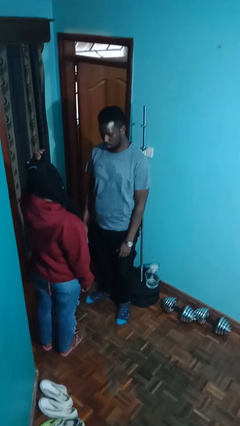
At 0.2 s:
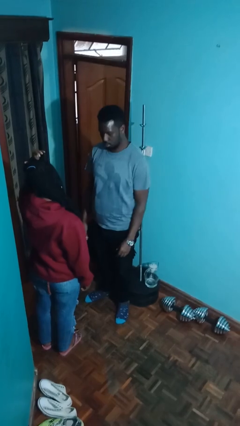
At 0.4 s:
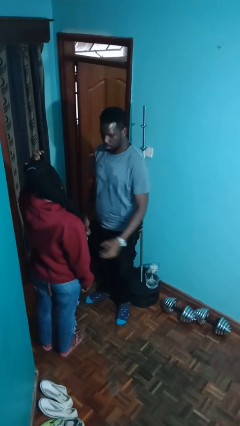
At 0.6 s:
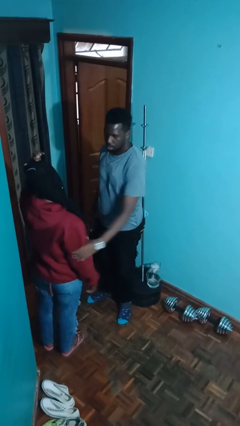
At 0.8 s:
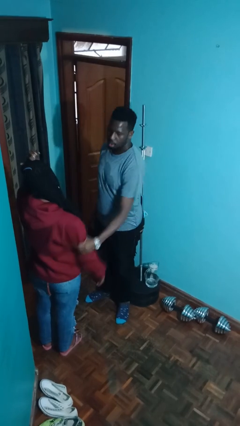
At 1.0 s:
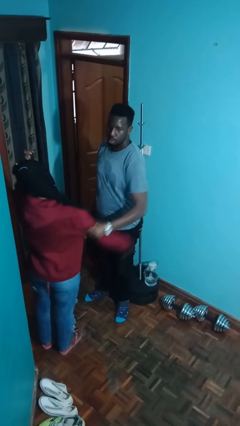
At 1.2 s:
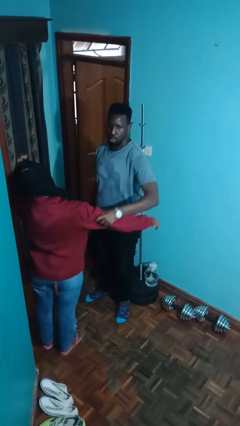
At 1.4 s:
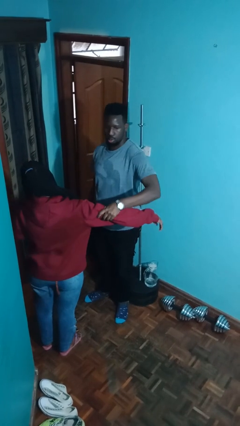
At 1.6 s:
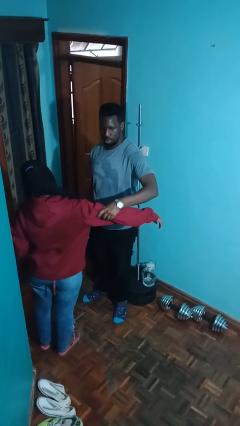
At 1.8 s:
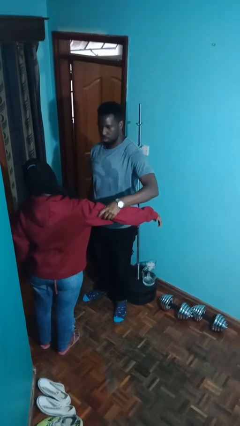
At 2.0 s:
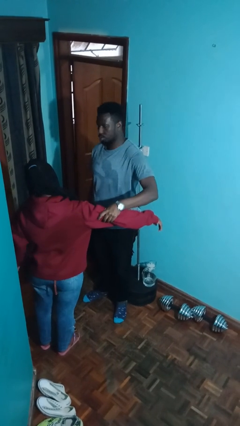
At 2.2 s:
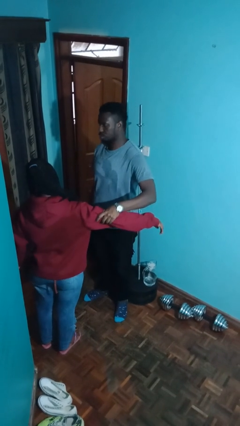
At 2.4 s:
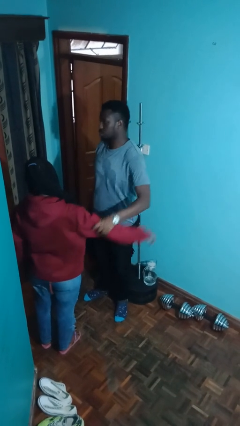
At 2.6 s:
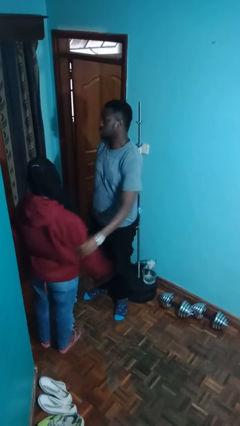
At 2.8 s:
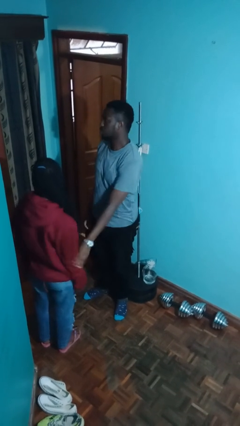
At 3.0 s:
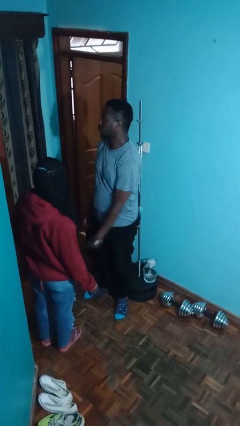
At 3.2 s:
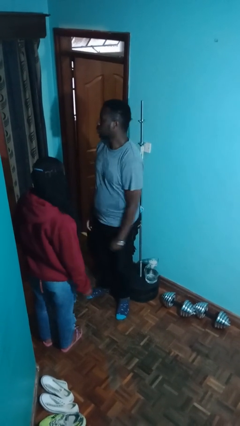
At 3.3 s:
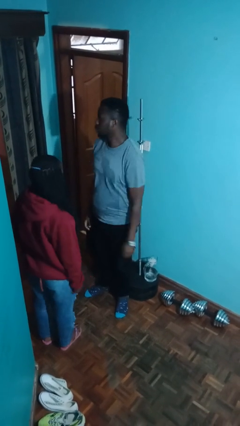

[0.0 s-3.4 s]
person grabs person by bicep

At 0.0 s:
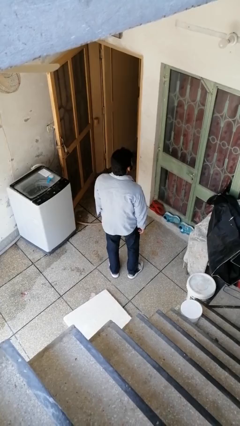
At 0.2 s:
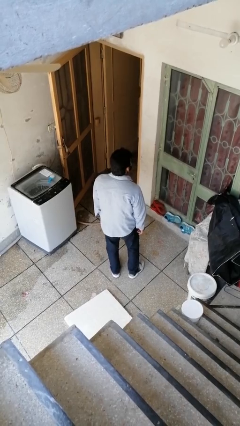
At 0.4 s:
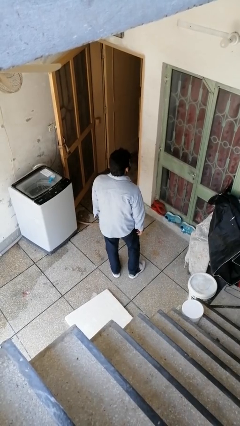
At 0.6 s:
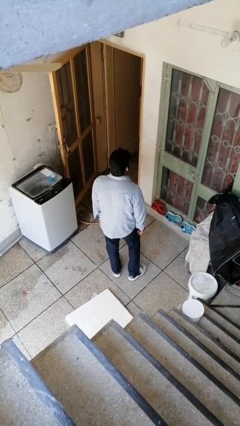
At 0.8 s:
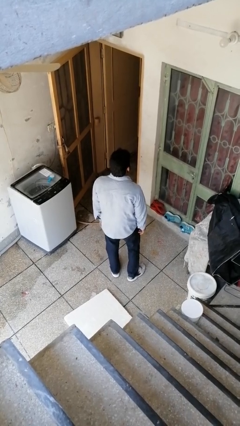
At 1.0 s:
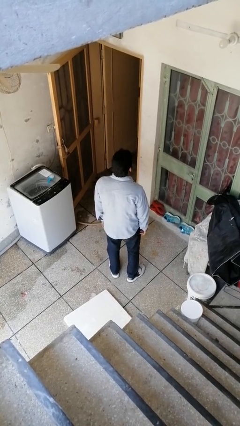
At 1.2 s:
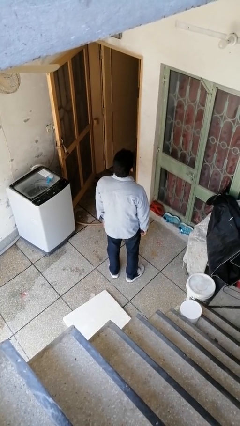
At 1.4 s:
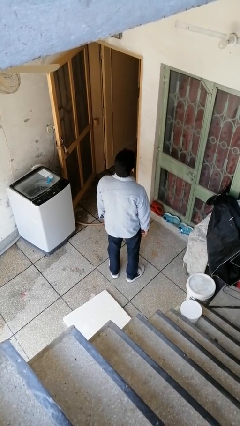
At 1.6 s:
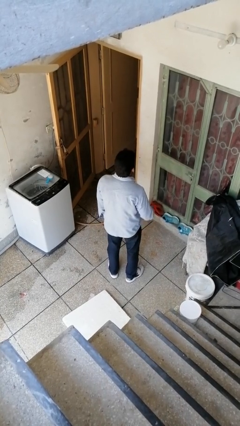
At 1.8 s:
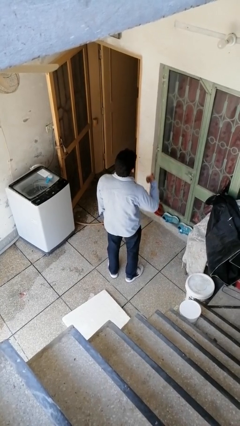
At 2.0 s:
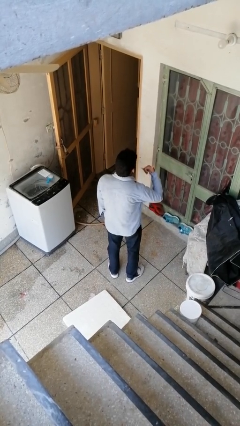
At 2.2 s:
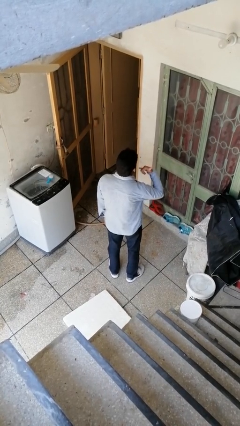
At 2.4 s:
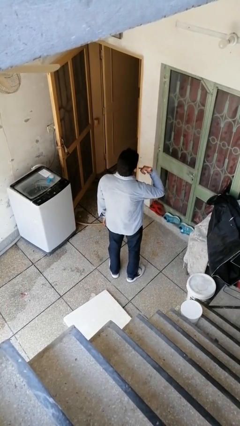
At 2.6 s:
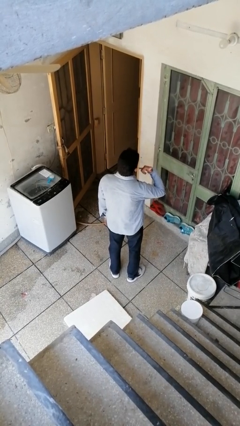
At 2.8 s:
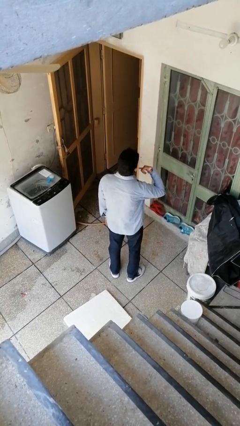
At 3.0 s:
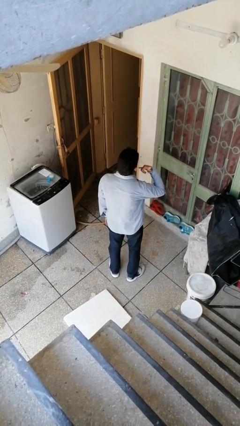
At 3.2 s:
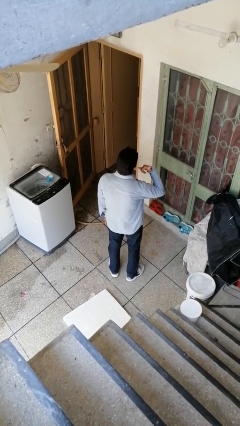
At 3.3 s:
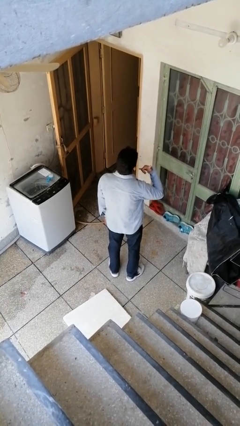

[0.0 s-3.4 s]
person gestures call me

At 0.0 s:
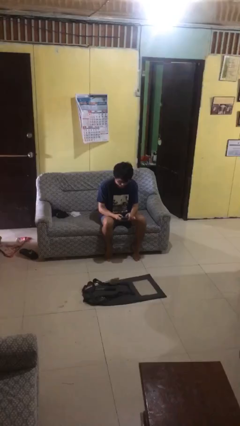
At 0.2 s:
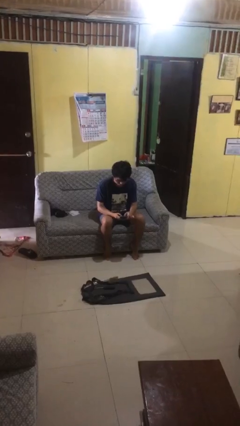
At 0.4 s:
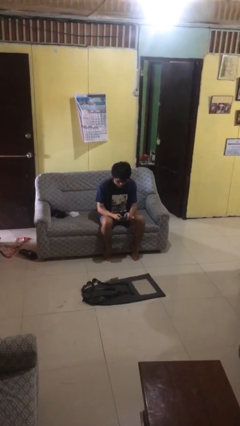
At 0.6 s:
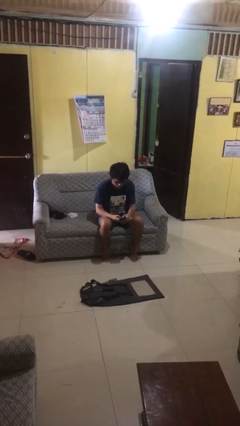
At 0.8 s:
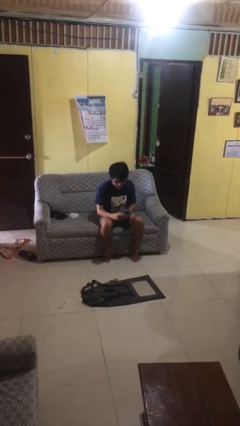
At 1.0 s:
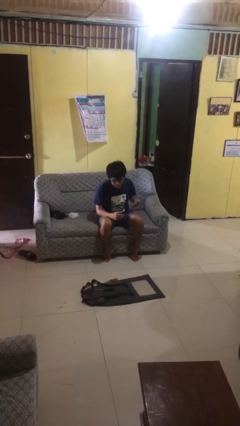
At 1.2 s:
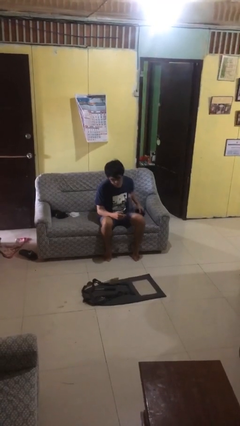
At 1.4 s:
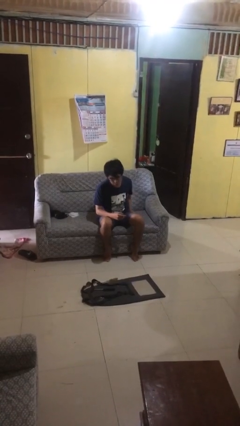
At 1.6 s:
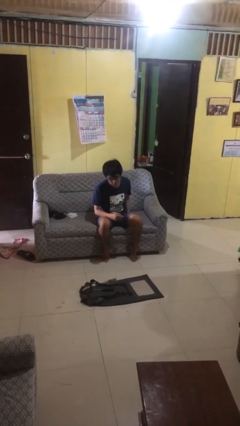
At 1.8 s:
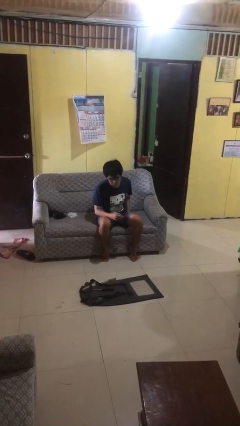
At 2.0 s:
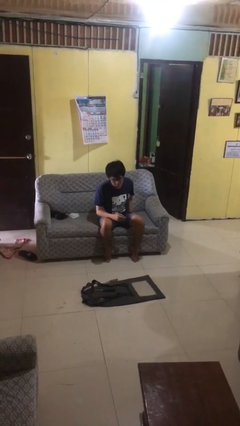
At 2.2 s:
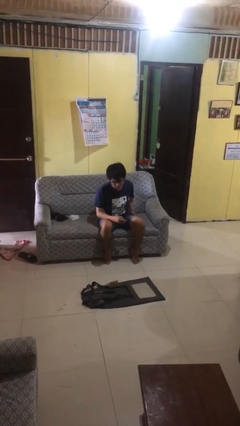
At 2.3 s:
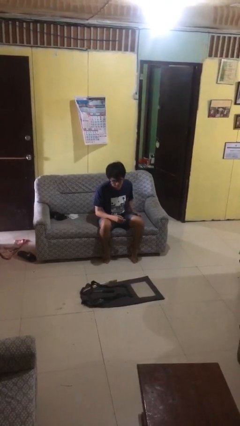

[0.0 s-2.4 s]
person puts phone into pocket

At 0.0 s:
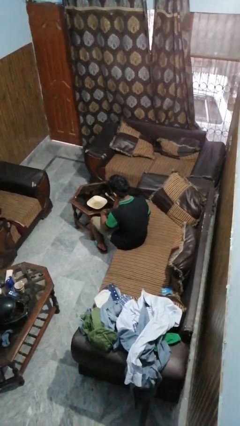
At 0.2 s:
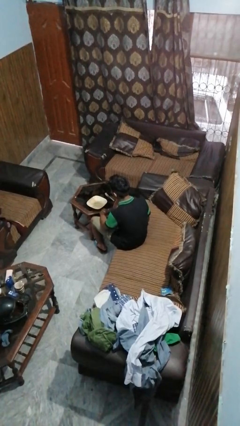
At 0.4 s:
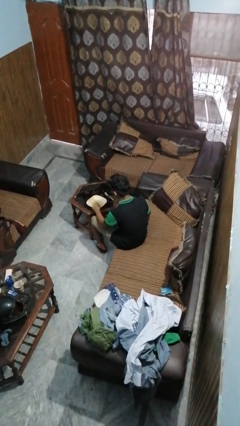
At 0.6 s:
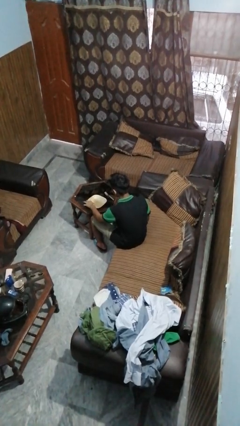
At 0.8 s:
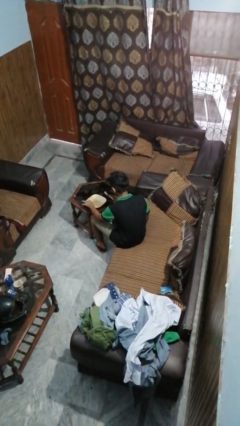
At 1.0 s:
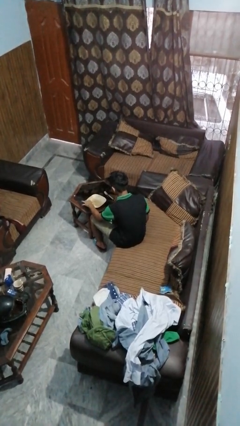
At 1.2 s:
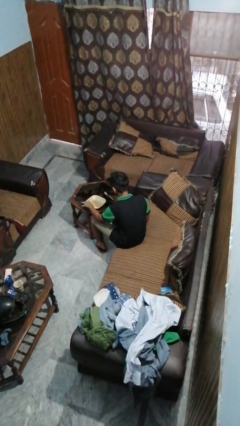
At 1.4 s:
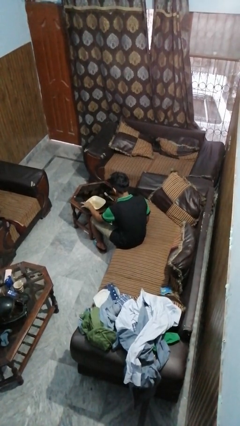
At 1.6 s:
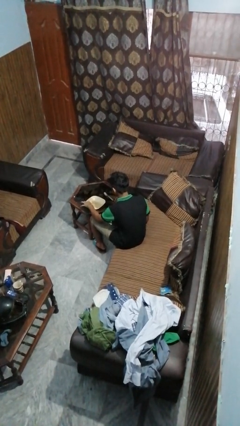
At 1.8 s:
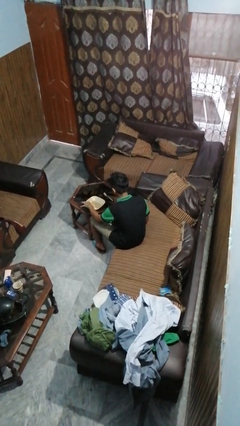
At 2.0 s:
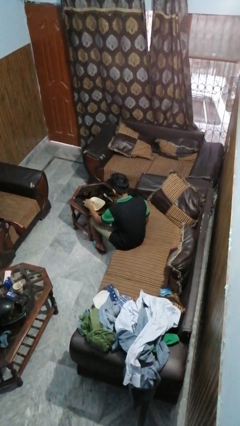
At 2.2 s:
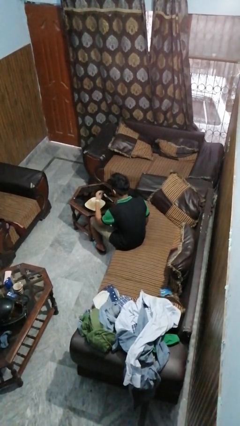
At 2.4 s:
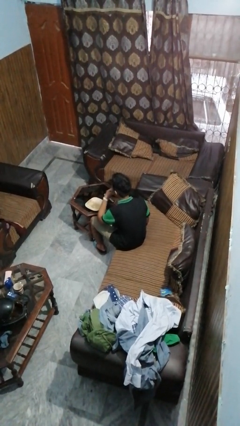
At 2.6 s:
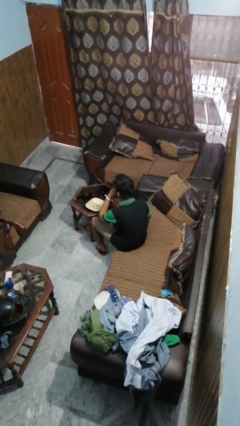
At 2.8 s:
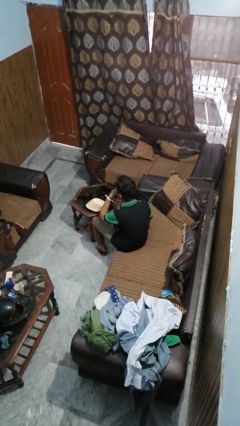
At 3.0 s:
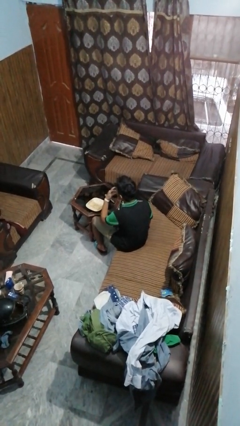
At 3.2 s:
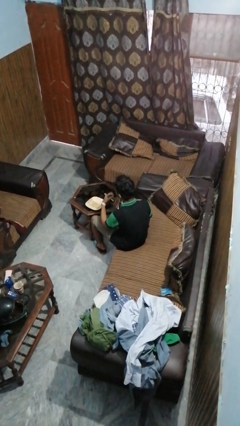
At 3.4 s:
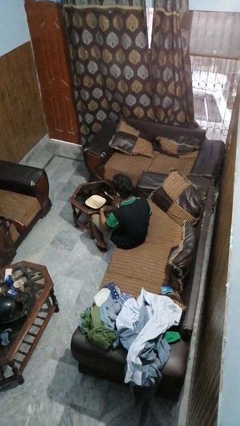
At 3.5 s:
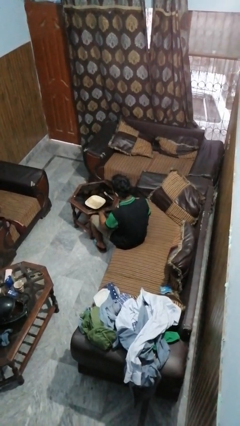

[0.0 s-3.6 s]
person eats with hands

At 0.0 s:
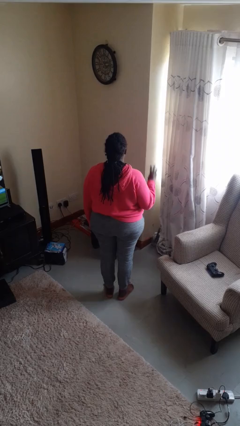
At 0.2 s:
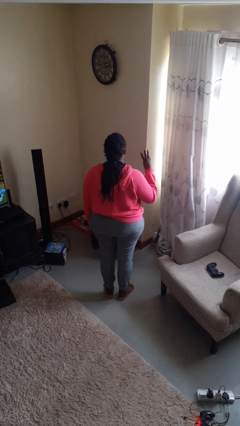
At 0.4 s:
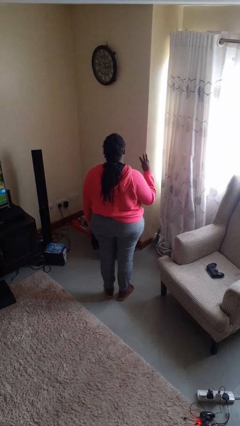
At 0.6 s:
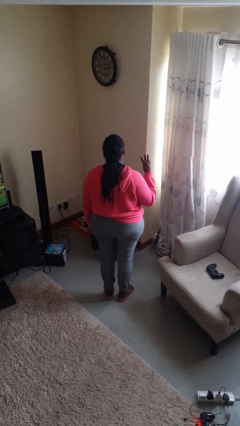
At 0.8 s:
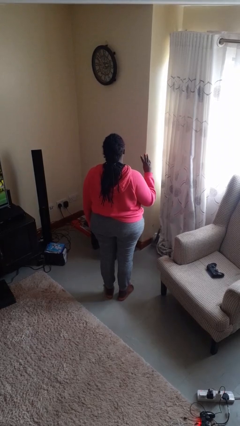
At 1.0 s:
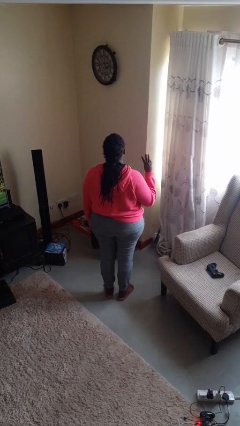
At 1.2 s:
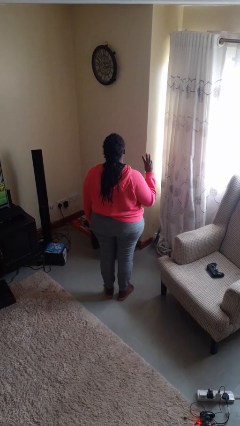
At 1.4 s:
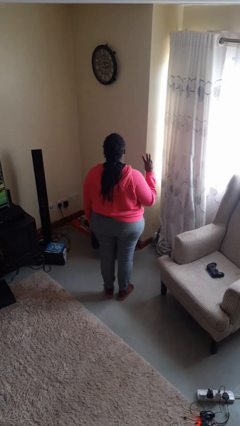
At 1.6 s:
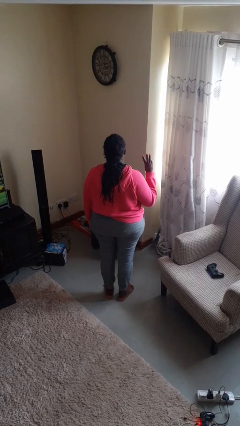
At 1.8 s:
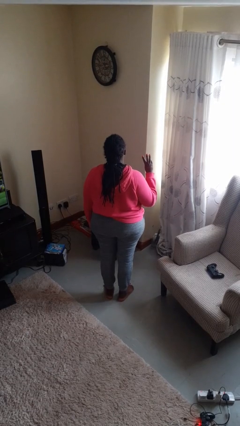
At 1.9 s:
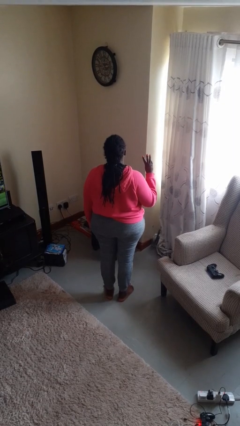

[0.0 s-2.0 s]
person gestures number three

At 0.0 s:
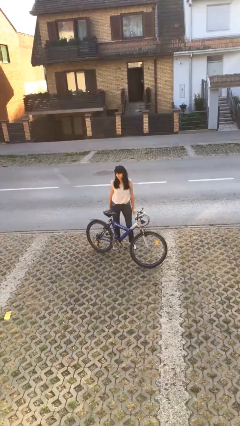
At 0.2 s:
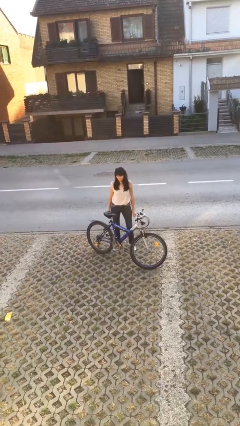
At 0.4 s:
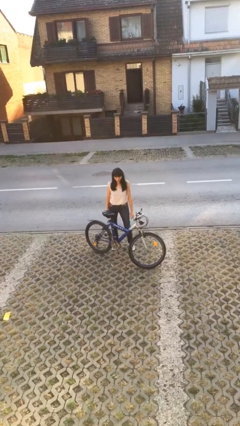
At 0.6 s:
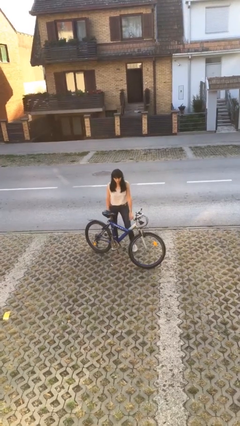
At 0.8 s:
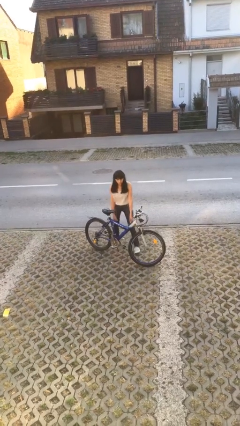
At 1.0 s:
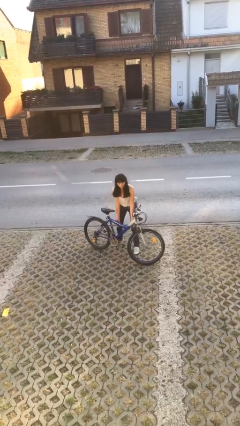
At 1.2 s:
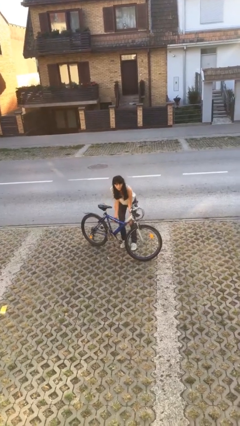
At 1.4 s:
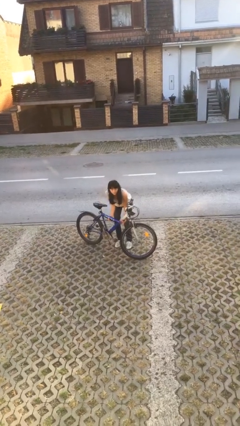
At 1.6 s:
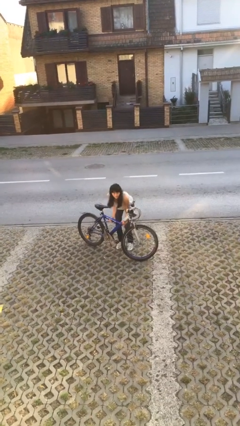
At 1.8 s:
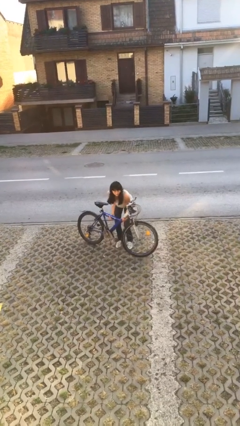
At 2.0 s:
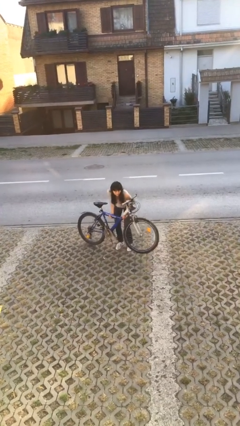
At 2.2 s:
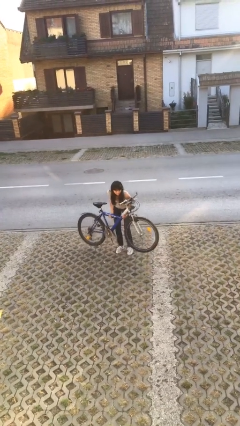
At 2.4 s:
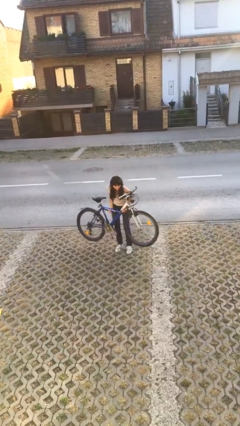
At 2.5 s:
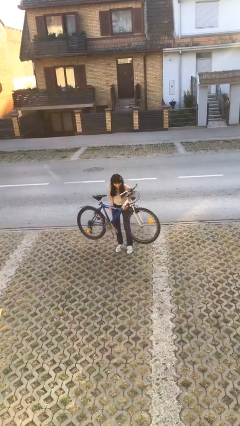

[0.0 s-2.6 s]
person picks up object from floor

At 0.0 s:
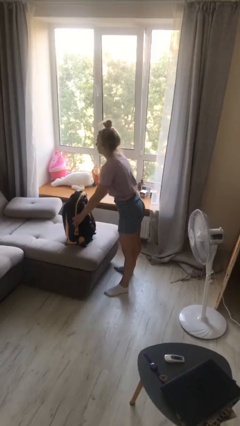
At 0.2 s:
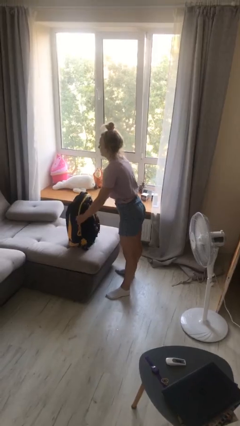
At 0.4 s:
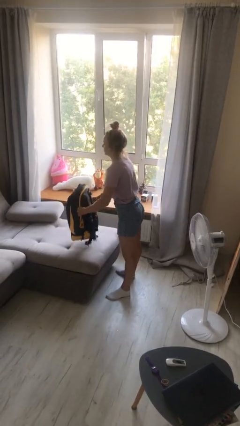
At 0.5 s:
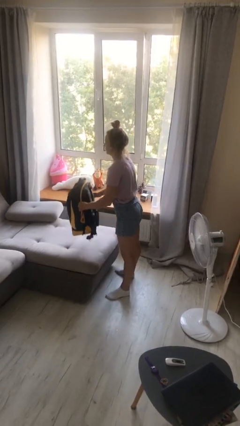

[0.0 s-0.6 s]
person picks up object from bed
